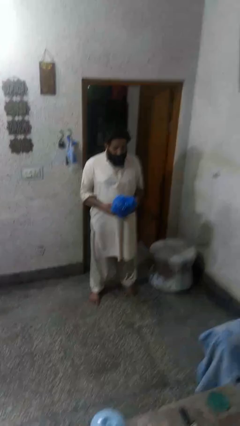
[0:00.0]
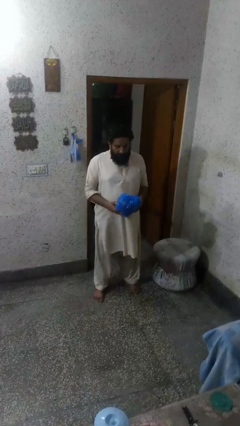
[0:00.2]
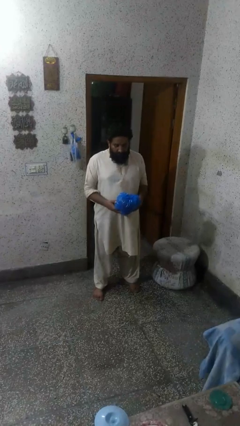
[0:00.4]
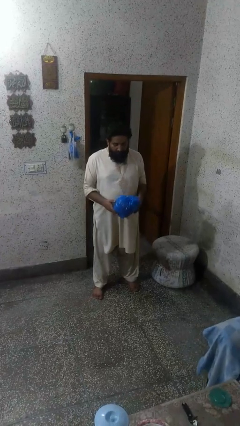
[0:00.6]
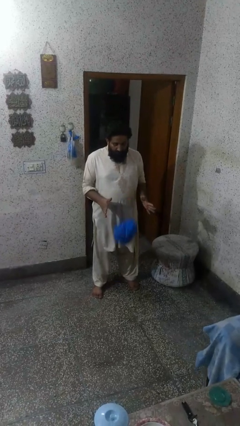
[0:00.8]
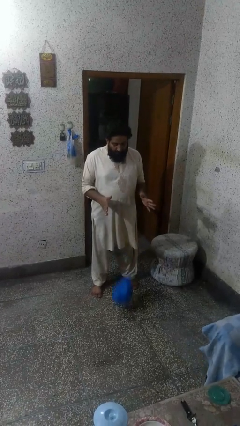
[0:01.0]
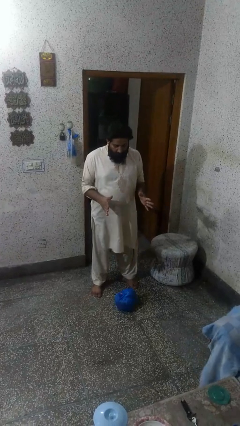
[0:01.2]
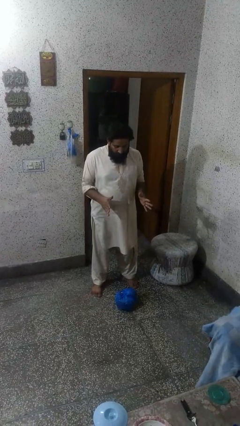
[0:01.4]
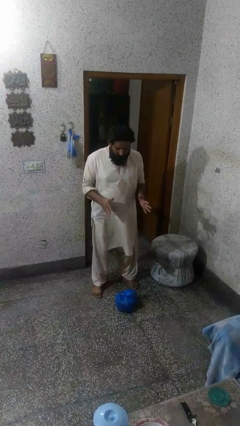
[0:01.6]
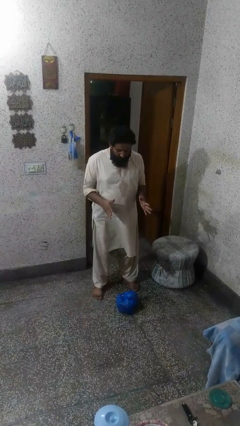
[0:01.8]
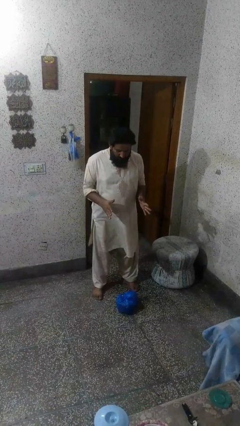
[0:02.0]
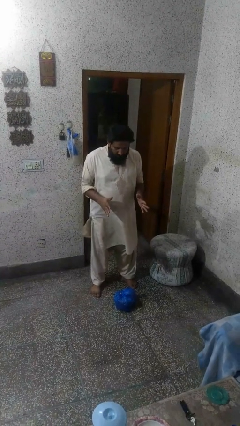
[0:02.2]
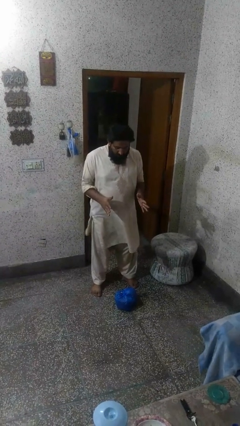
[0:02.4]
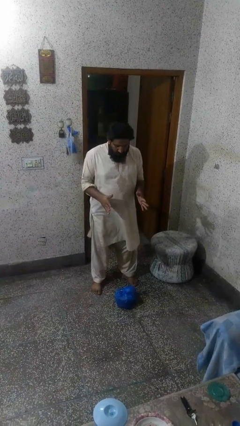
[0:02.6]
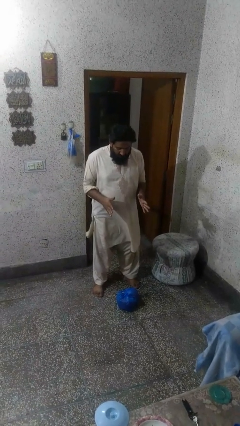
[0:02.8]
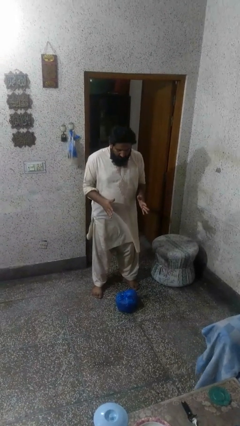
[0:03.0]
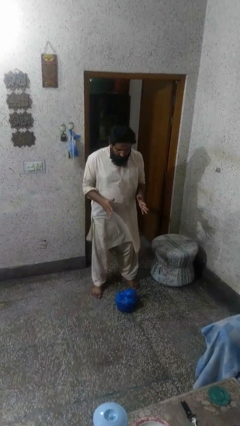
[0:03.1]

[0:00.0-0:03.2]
person drops object

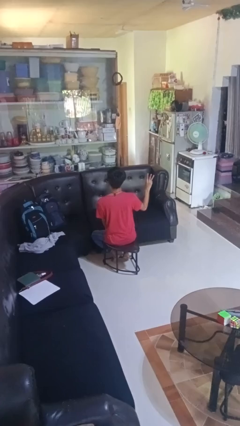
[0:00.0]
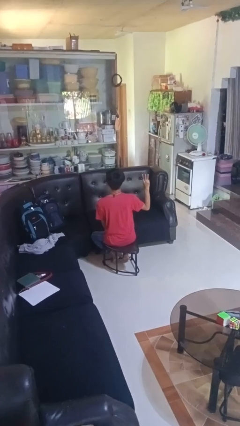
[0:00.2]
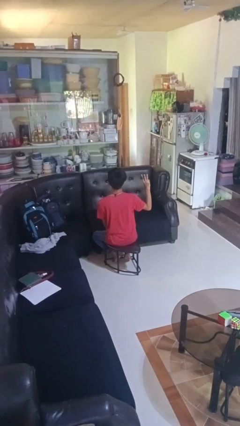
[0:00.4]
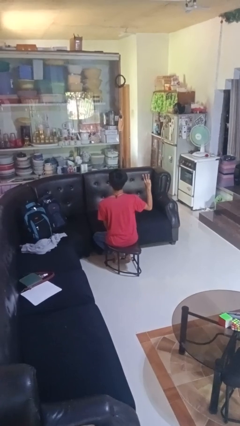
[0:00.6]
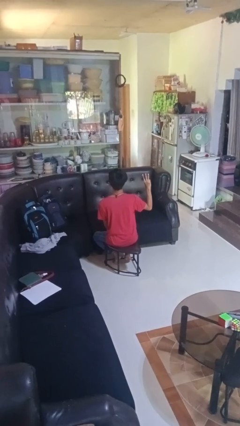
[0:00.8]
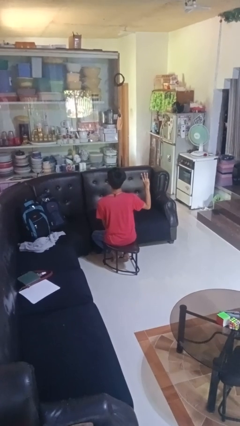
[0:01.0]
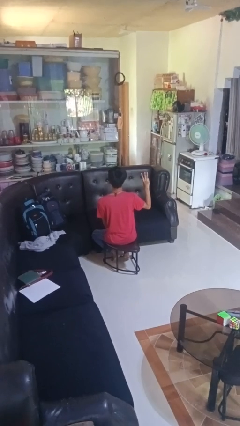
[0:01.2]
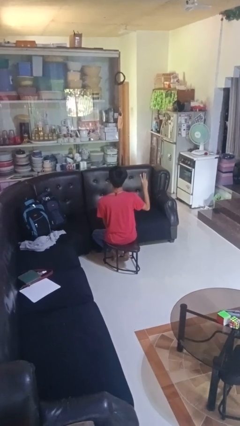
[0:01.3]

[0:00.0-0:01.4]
person gestures number three

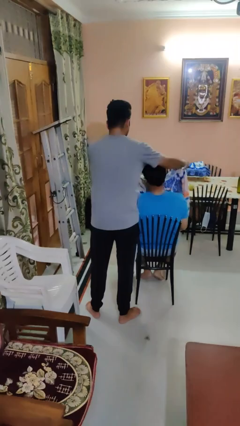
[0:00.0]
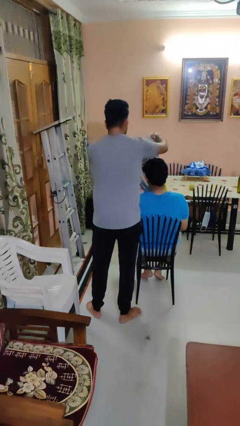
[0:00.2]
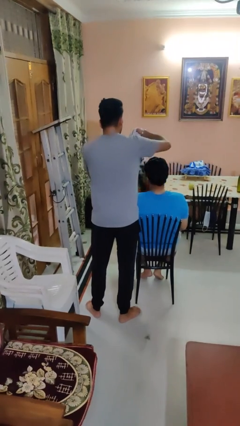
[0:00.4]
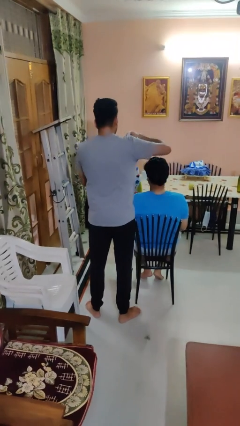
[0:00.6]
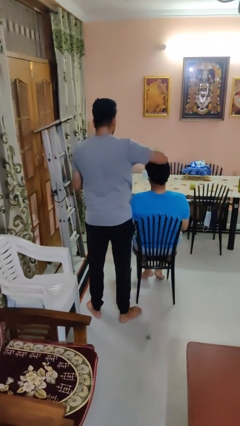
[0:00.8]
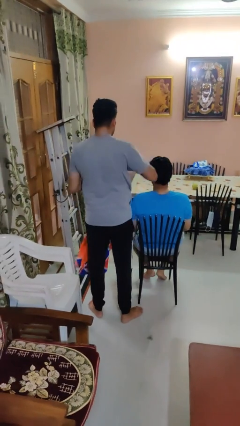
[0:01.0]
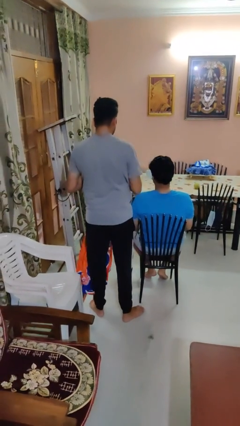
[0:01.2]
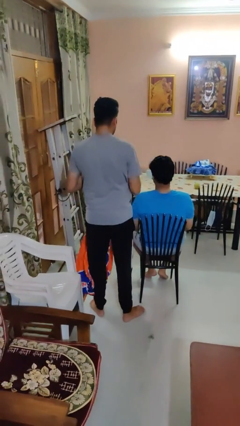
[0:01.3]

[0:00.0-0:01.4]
person uncovers friend with blanket

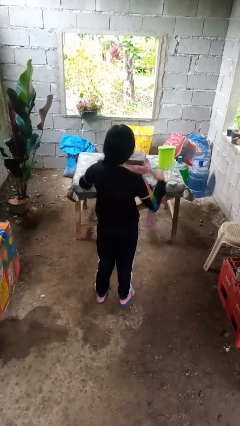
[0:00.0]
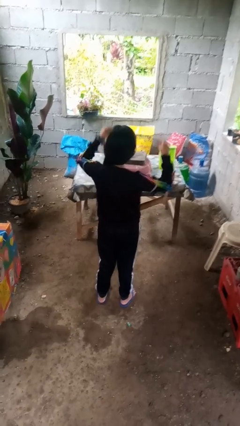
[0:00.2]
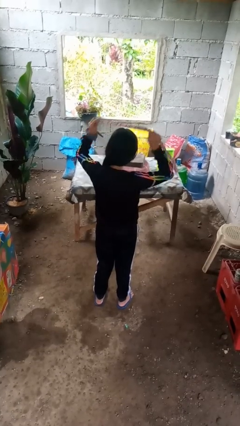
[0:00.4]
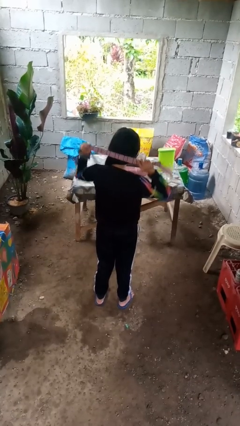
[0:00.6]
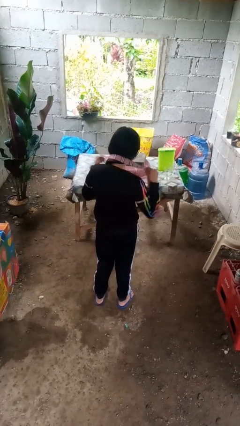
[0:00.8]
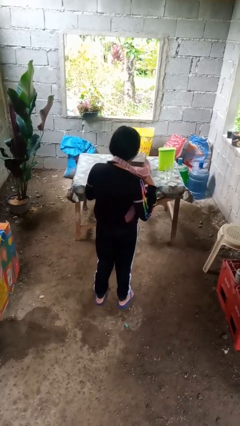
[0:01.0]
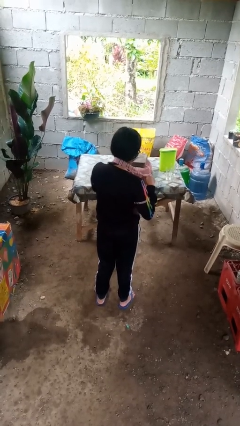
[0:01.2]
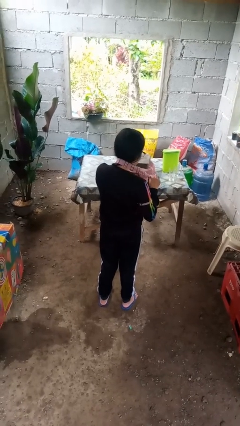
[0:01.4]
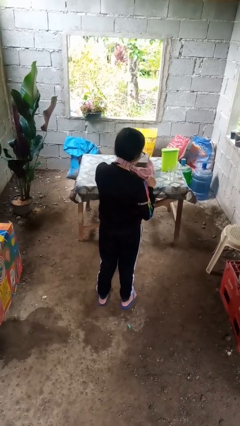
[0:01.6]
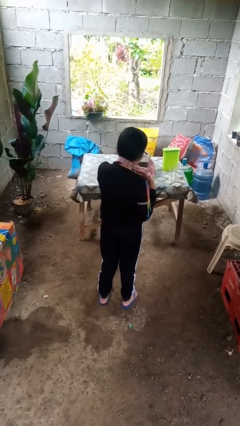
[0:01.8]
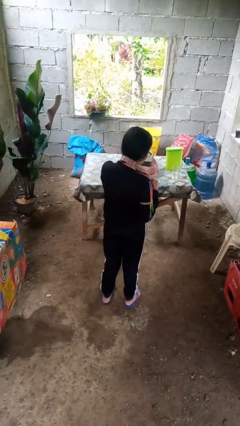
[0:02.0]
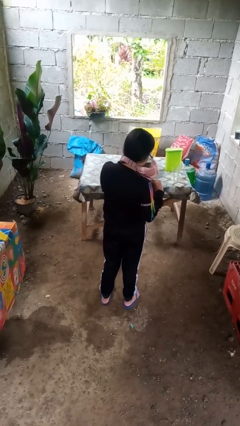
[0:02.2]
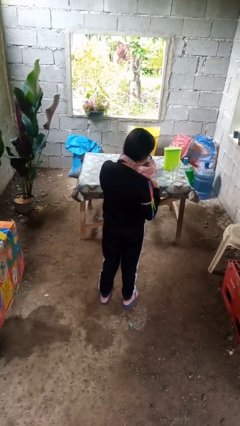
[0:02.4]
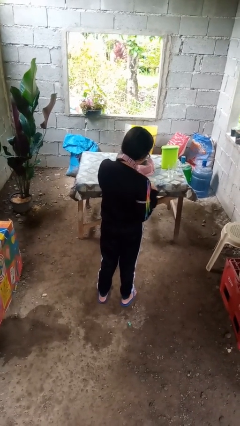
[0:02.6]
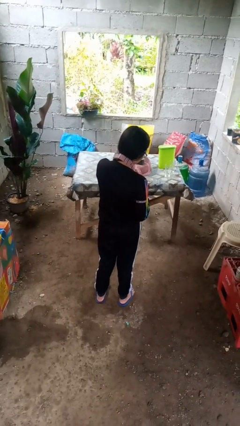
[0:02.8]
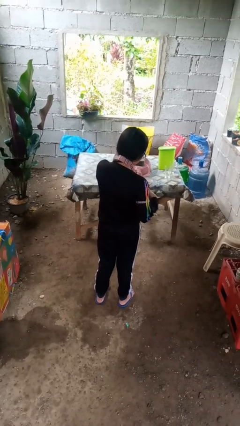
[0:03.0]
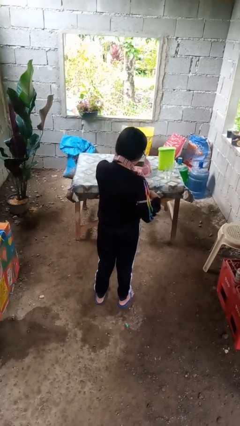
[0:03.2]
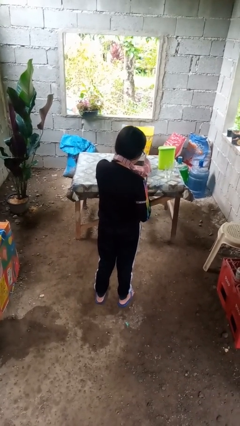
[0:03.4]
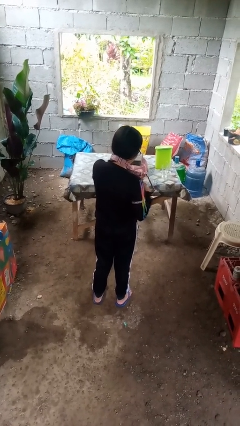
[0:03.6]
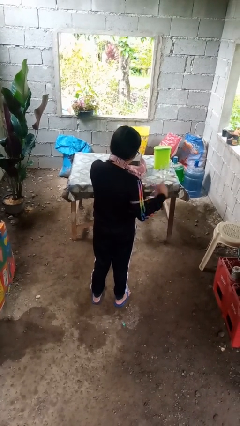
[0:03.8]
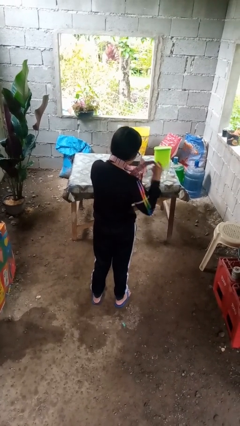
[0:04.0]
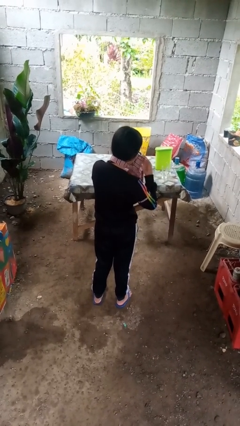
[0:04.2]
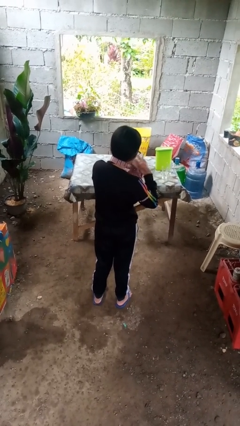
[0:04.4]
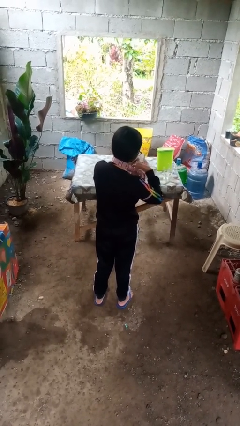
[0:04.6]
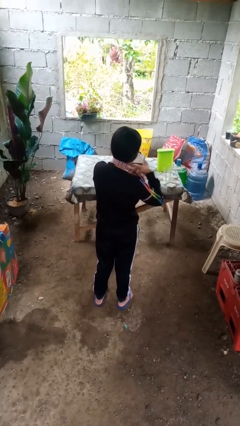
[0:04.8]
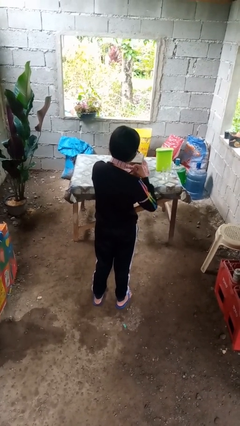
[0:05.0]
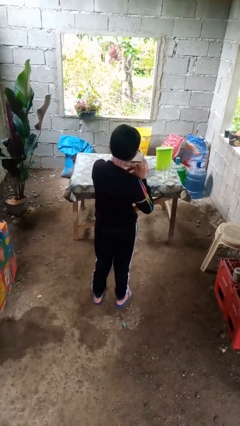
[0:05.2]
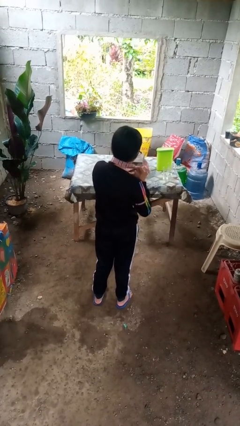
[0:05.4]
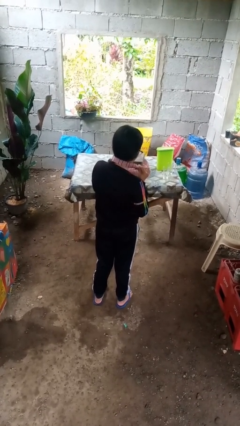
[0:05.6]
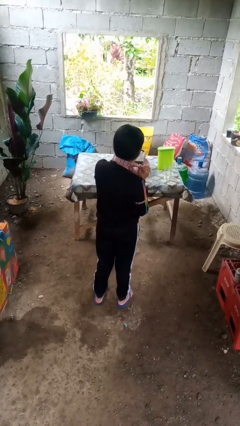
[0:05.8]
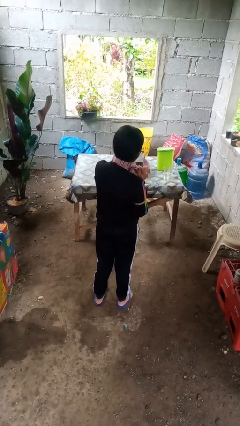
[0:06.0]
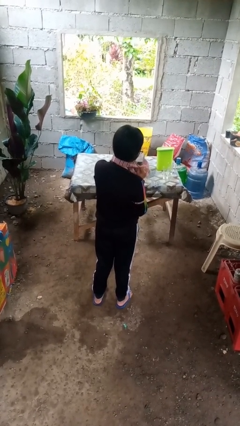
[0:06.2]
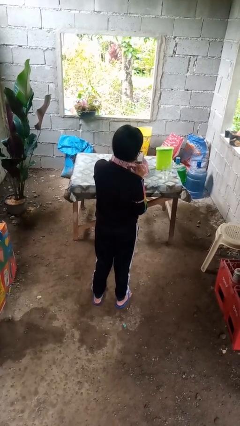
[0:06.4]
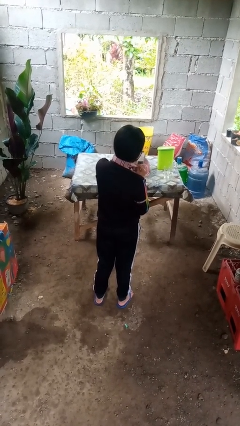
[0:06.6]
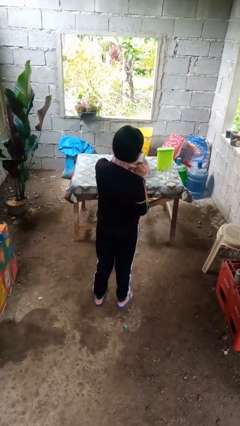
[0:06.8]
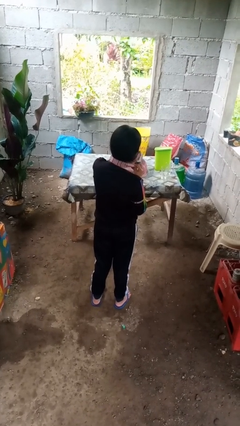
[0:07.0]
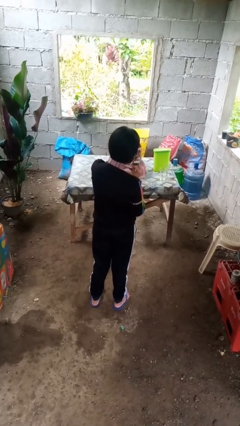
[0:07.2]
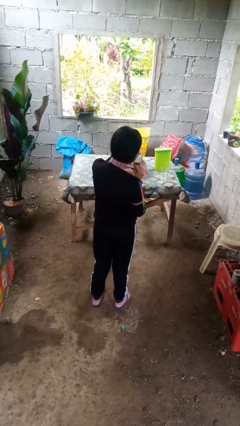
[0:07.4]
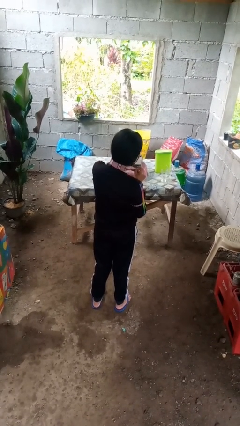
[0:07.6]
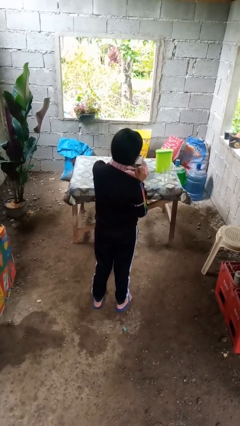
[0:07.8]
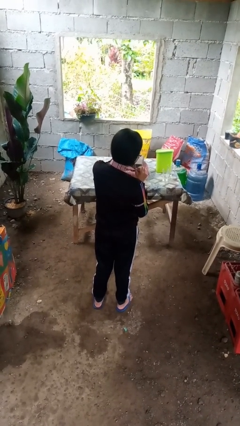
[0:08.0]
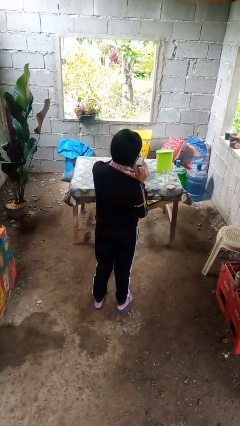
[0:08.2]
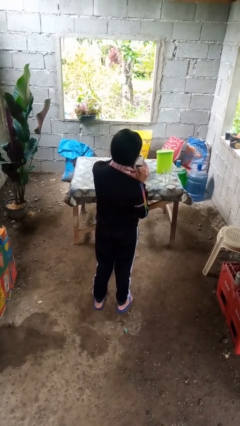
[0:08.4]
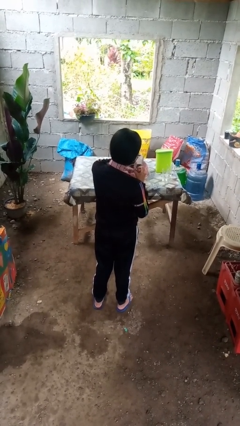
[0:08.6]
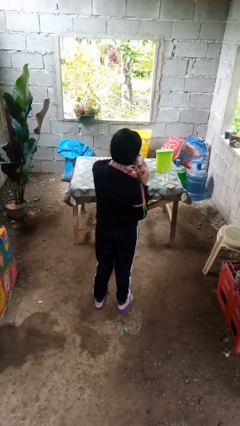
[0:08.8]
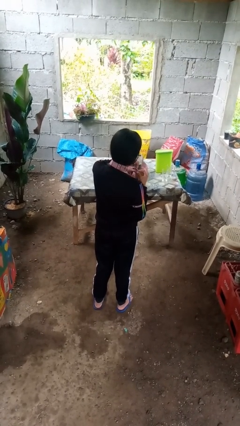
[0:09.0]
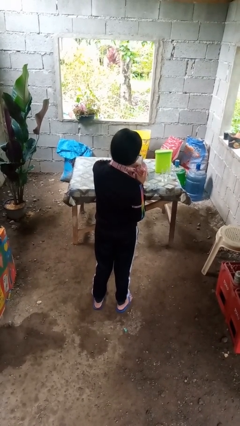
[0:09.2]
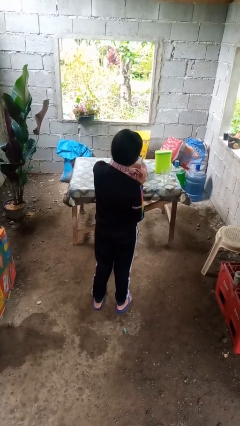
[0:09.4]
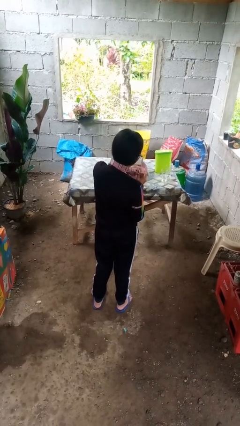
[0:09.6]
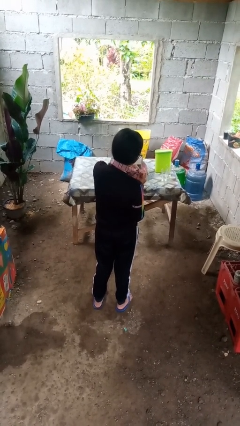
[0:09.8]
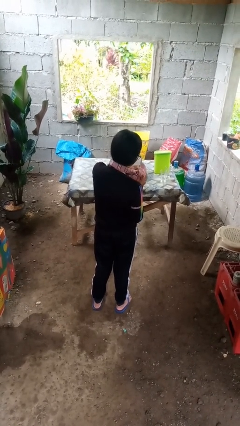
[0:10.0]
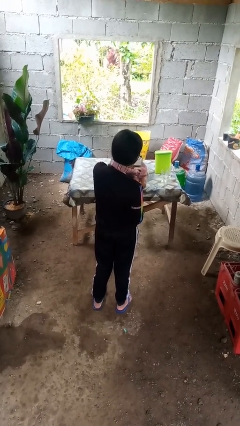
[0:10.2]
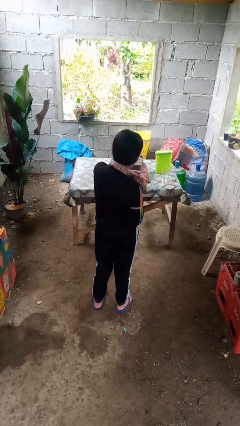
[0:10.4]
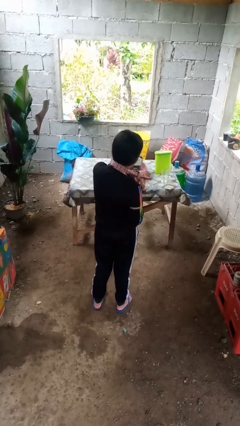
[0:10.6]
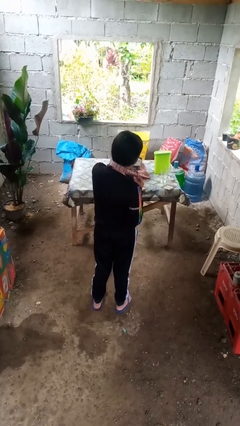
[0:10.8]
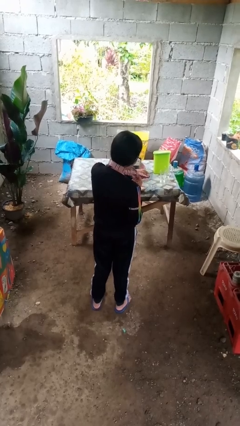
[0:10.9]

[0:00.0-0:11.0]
person puts on necktie

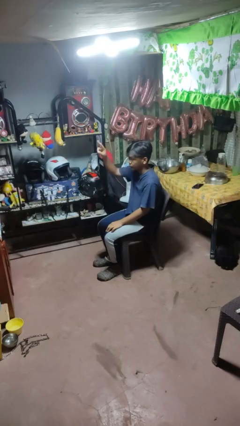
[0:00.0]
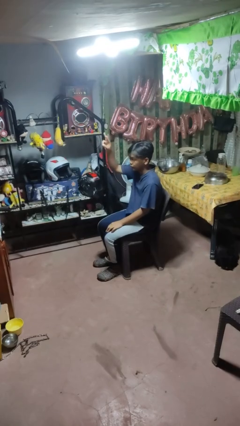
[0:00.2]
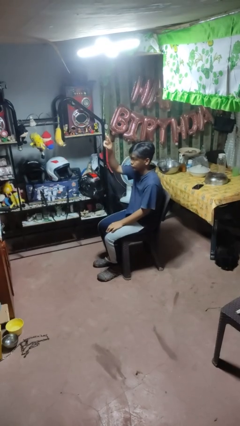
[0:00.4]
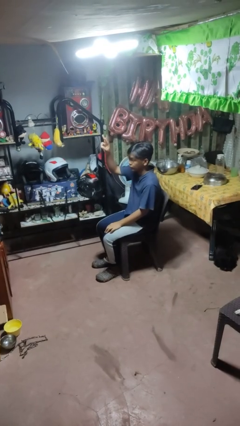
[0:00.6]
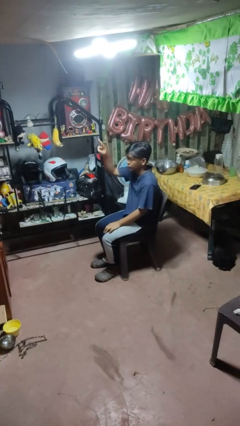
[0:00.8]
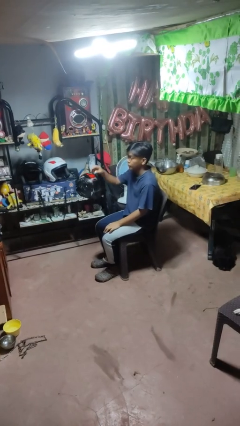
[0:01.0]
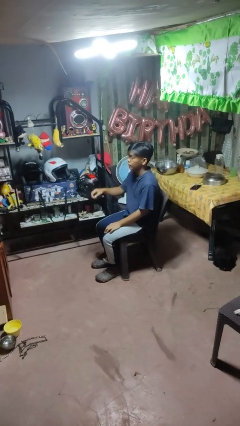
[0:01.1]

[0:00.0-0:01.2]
person gestures peace
